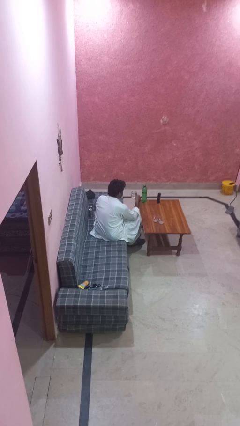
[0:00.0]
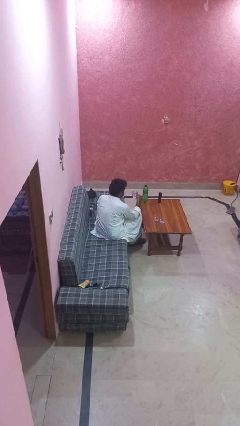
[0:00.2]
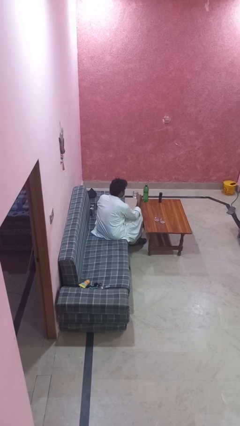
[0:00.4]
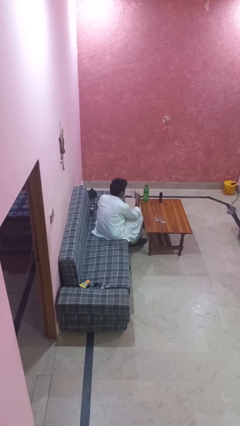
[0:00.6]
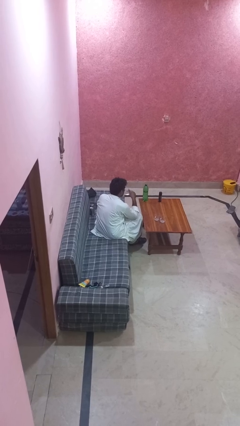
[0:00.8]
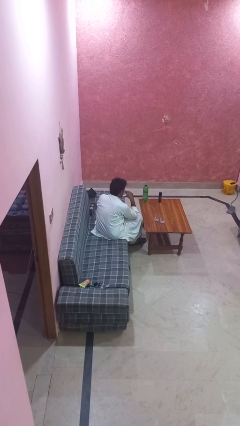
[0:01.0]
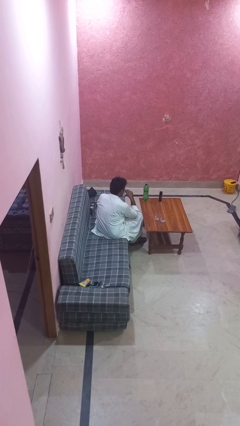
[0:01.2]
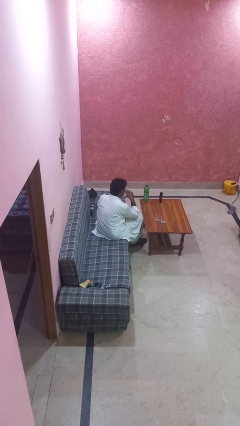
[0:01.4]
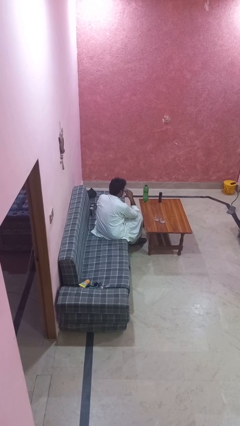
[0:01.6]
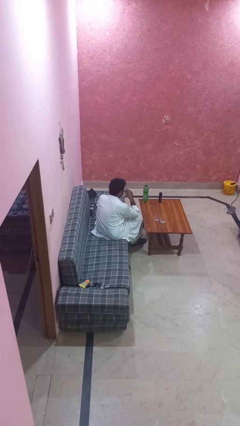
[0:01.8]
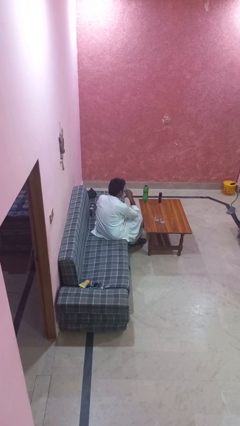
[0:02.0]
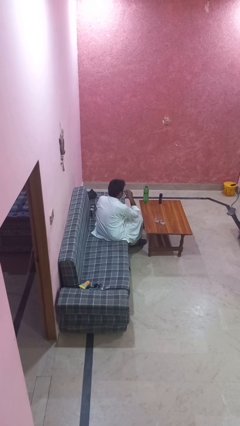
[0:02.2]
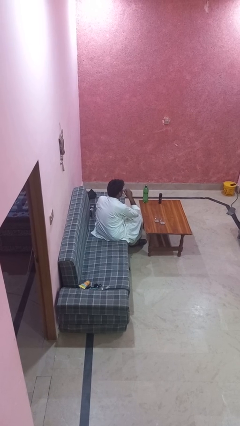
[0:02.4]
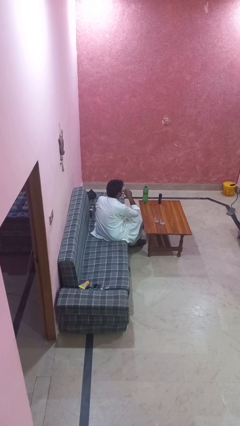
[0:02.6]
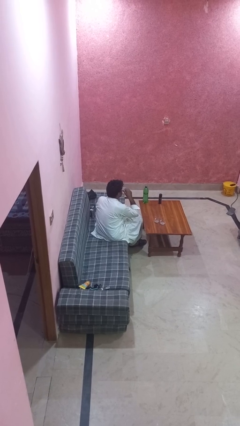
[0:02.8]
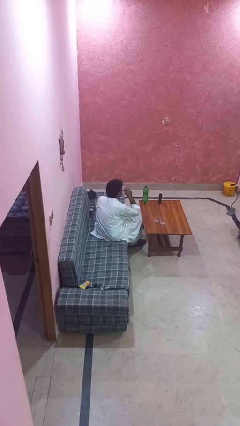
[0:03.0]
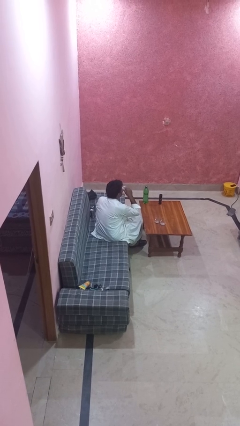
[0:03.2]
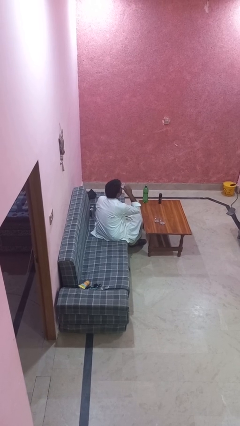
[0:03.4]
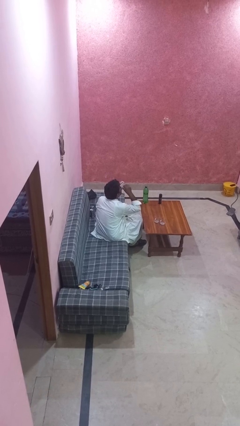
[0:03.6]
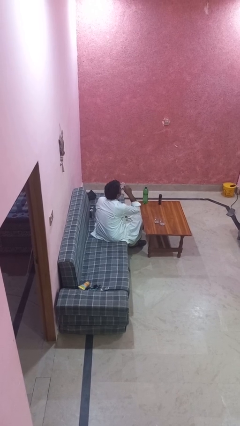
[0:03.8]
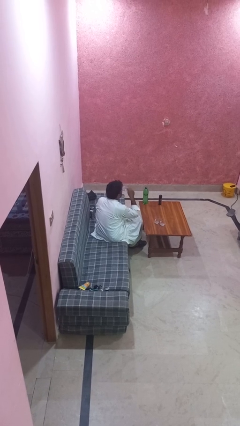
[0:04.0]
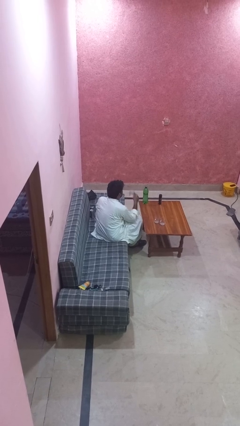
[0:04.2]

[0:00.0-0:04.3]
person drinks from shotglass

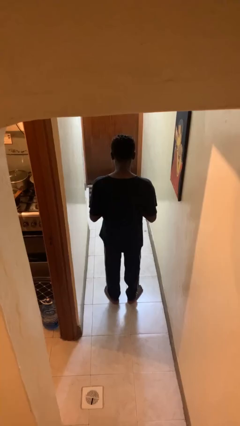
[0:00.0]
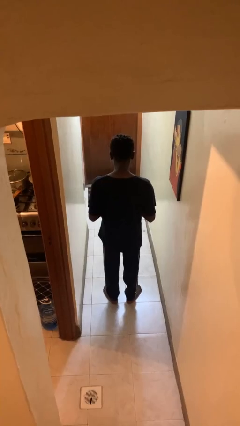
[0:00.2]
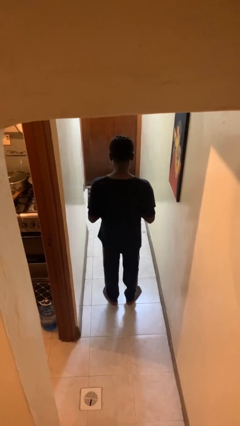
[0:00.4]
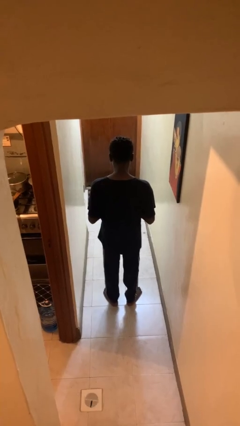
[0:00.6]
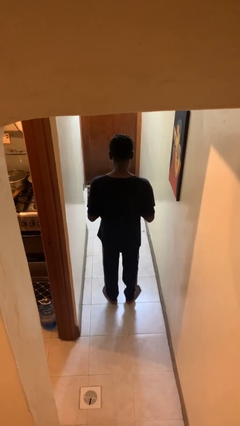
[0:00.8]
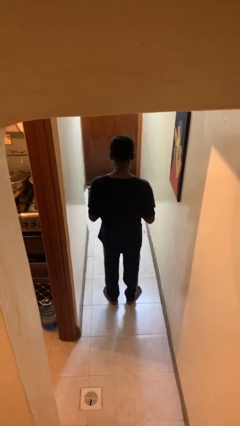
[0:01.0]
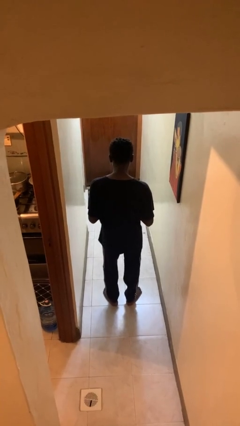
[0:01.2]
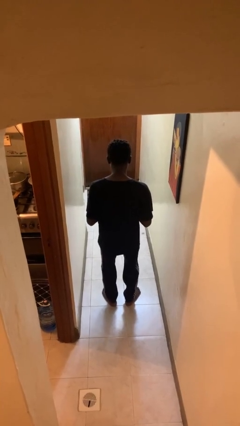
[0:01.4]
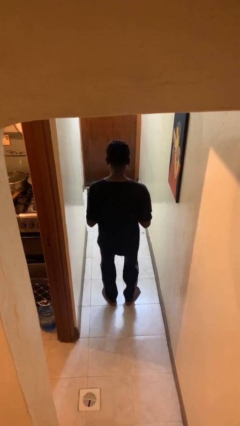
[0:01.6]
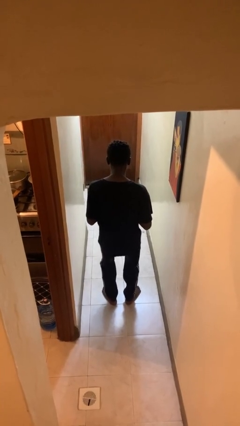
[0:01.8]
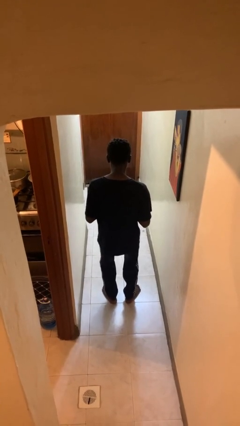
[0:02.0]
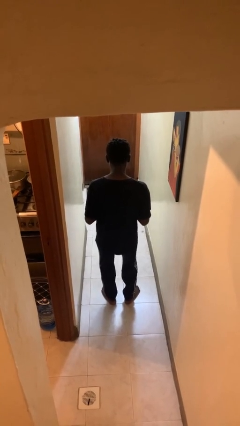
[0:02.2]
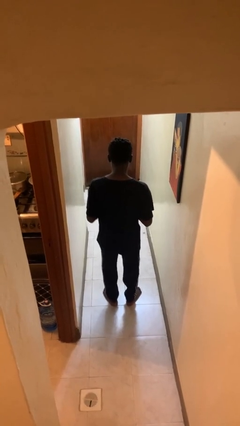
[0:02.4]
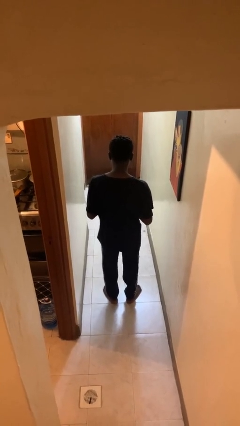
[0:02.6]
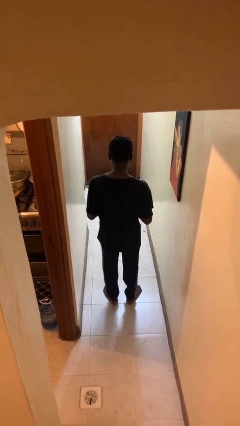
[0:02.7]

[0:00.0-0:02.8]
person dances in place

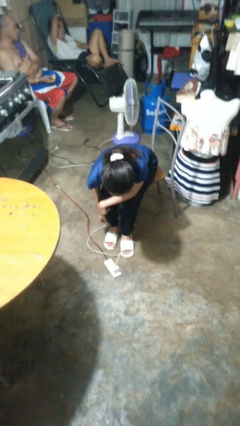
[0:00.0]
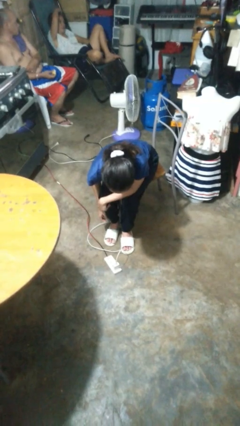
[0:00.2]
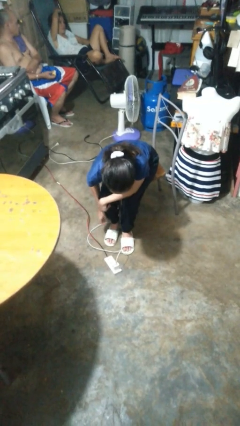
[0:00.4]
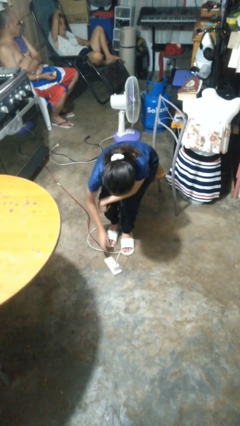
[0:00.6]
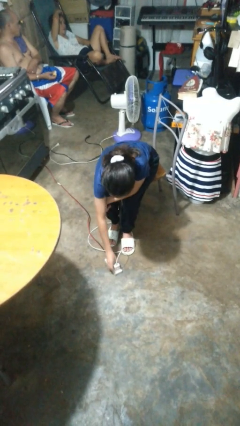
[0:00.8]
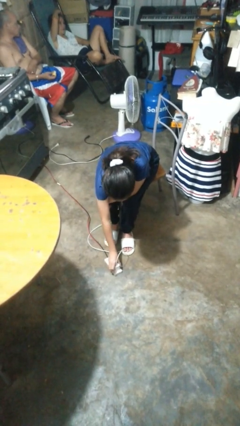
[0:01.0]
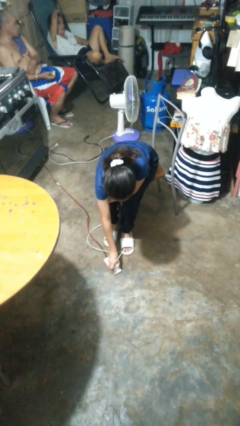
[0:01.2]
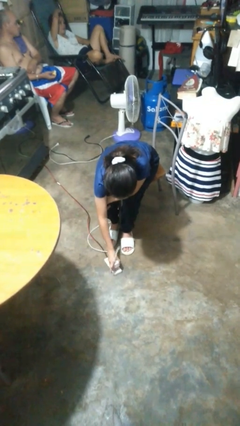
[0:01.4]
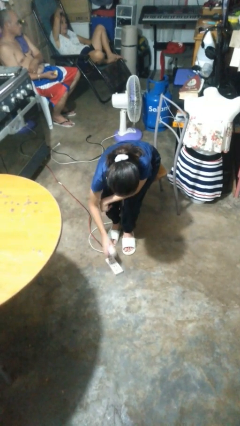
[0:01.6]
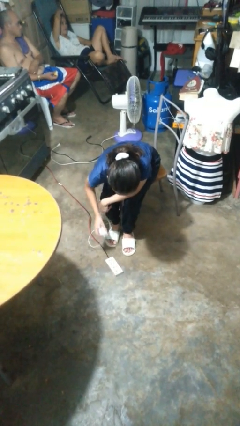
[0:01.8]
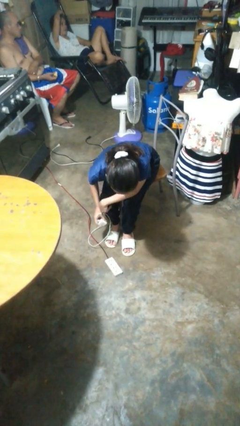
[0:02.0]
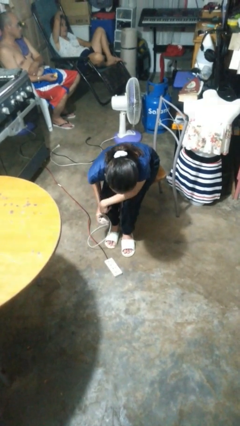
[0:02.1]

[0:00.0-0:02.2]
person unplugs from electrical socket

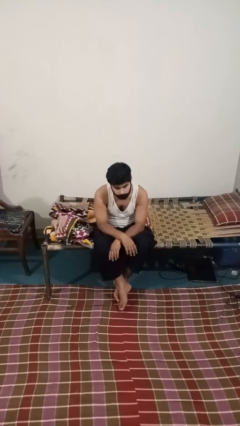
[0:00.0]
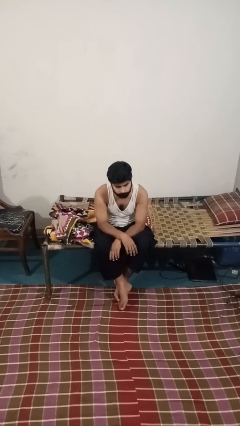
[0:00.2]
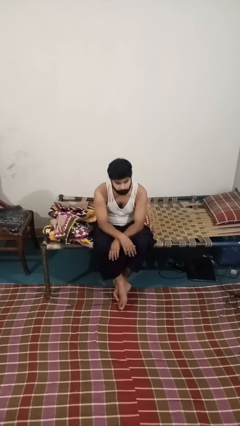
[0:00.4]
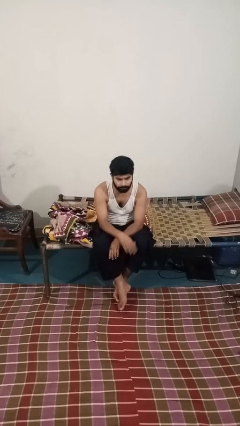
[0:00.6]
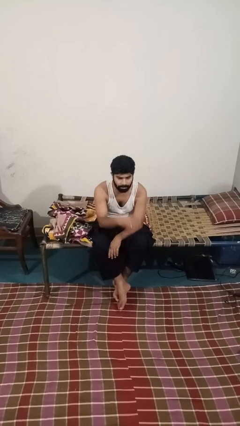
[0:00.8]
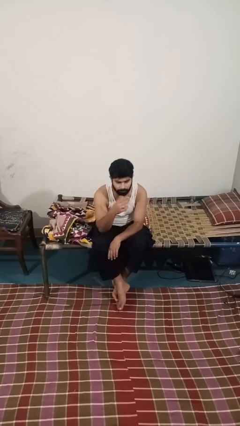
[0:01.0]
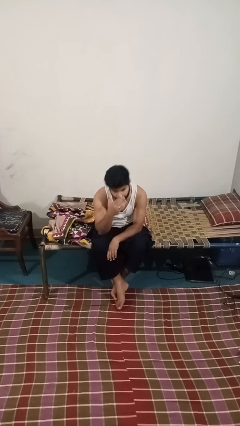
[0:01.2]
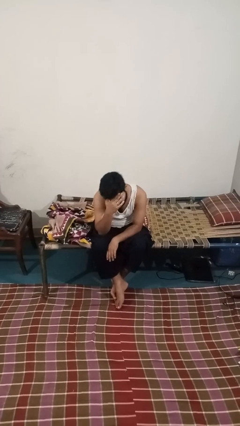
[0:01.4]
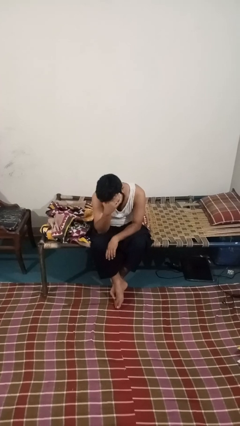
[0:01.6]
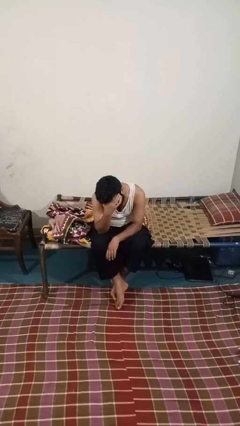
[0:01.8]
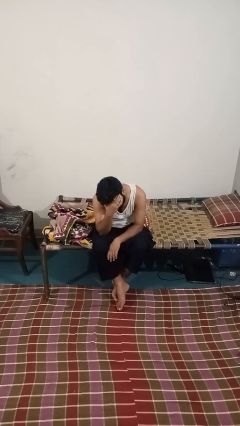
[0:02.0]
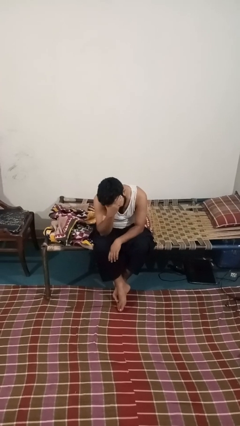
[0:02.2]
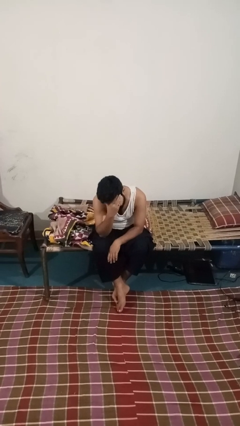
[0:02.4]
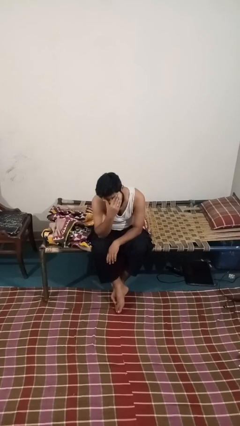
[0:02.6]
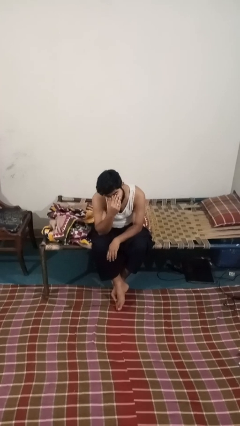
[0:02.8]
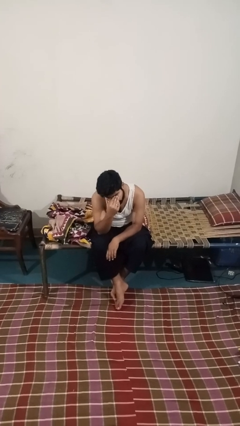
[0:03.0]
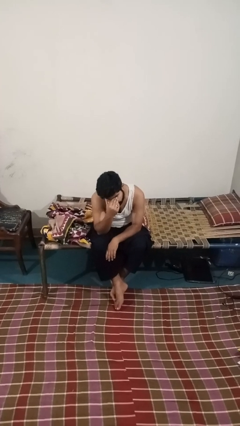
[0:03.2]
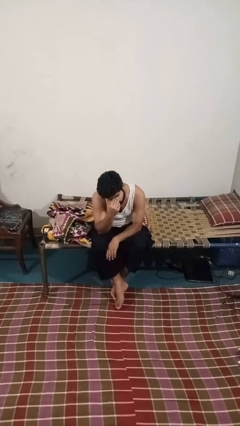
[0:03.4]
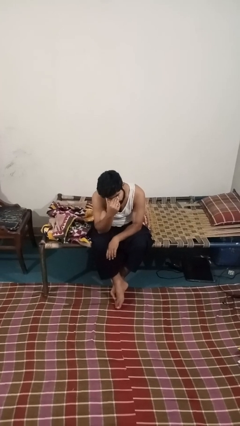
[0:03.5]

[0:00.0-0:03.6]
person covers face with hands

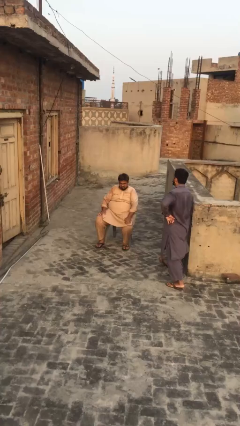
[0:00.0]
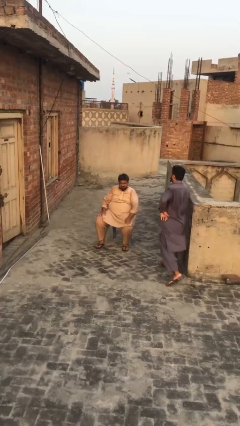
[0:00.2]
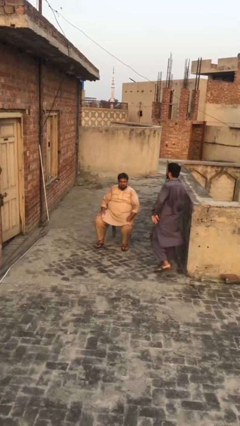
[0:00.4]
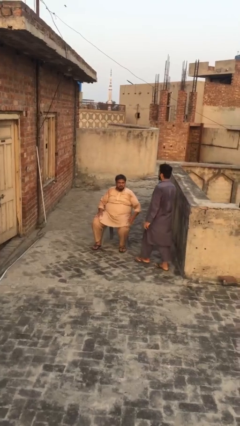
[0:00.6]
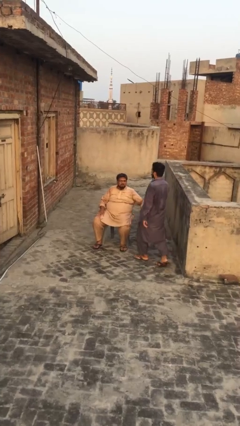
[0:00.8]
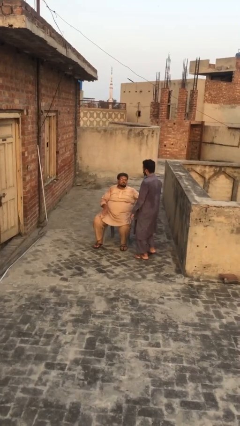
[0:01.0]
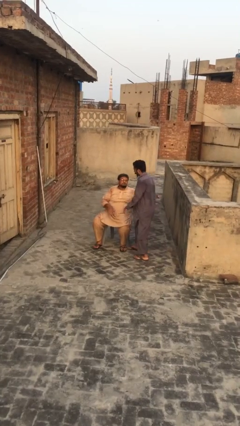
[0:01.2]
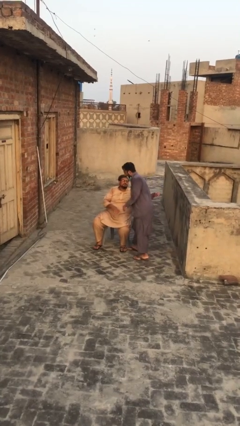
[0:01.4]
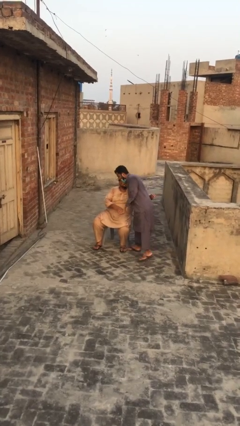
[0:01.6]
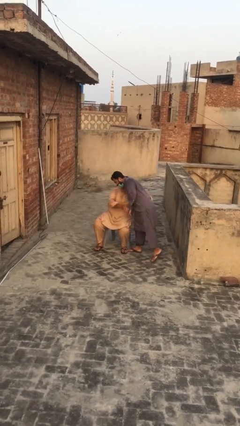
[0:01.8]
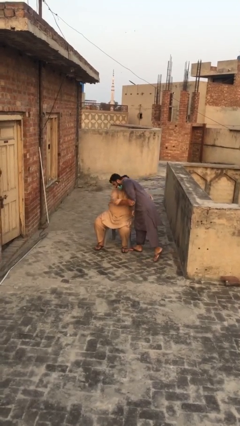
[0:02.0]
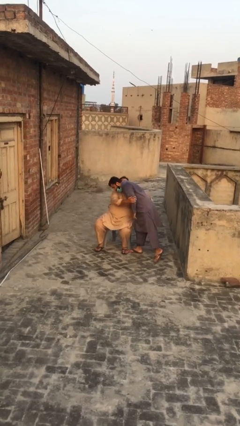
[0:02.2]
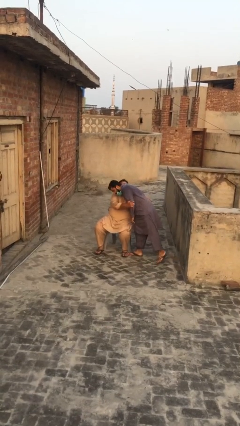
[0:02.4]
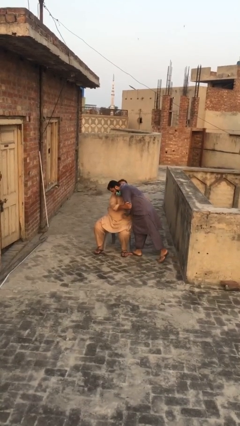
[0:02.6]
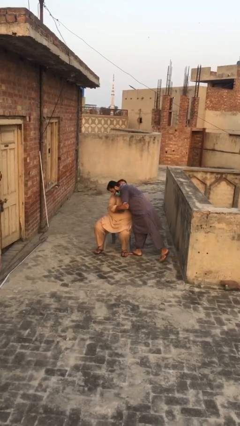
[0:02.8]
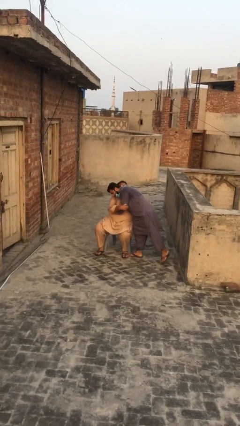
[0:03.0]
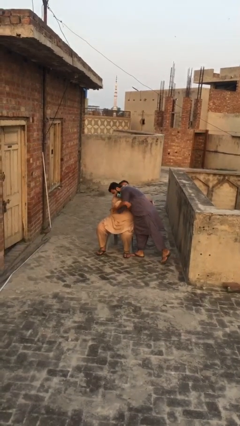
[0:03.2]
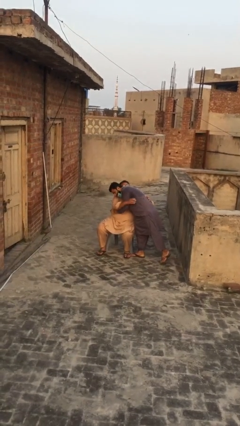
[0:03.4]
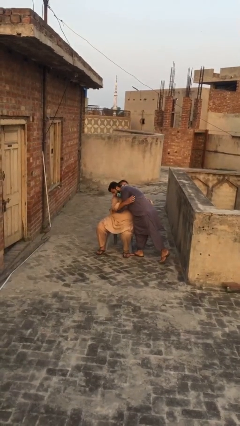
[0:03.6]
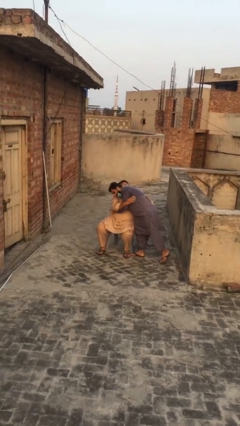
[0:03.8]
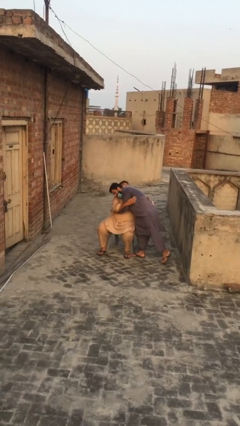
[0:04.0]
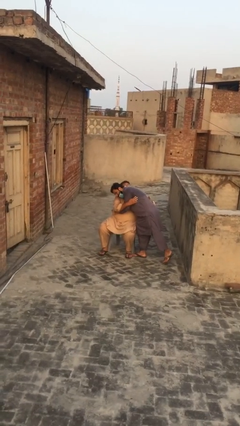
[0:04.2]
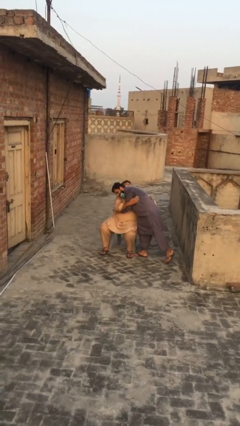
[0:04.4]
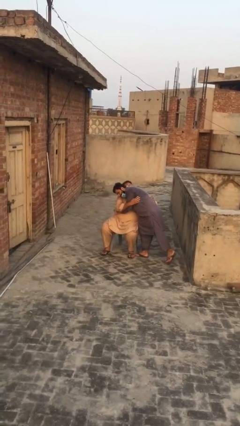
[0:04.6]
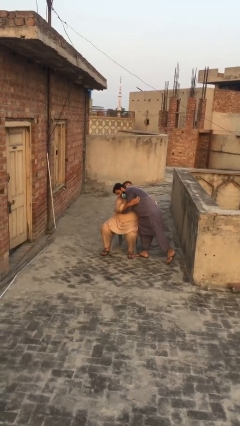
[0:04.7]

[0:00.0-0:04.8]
person embraces person
